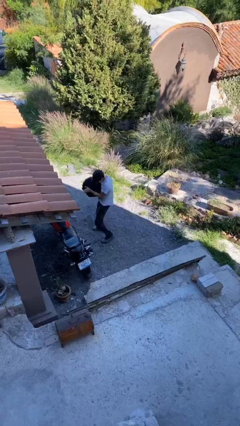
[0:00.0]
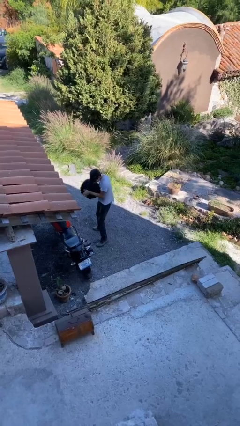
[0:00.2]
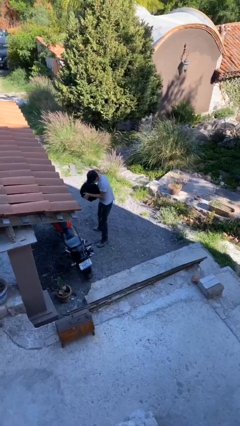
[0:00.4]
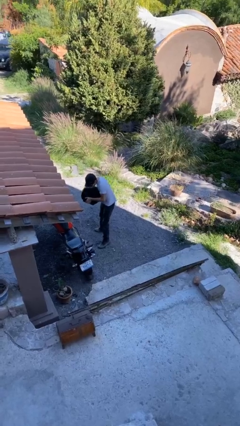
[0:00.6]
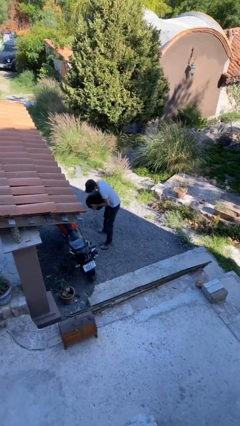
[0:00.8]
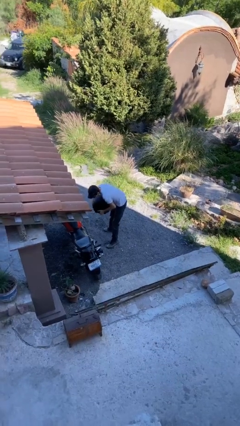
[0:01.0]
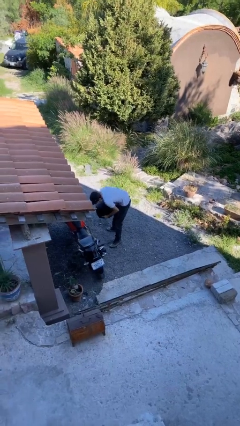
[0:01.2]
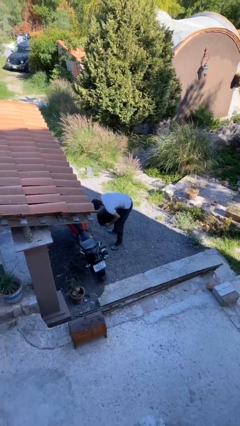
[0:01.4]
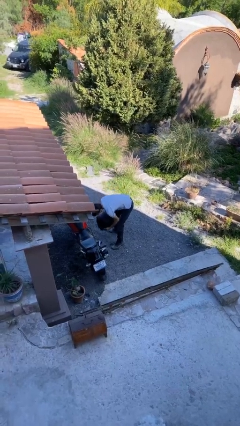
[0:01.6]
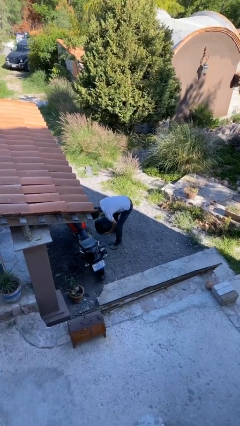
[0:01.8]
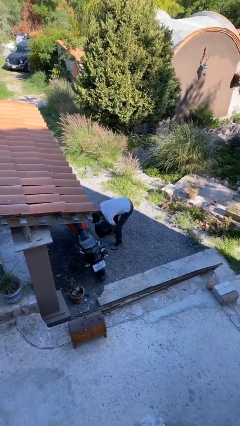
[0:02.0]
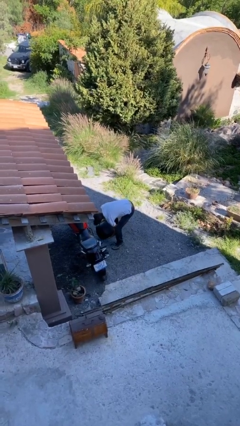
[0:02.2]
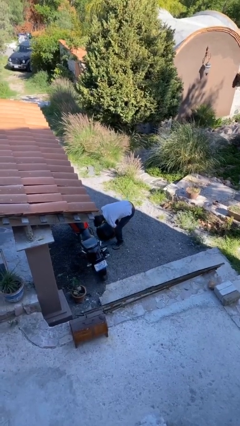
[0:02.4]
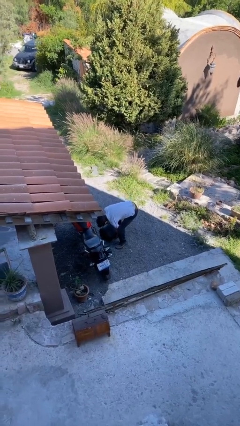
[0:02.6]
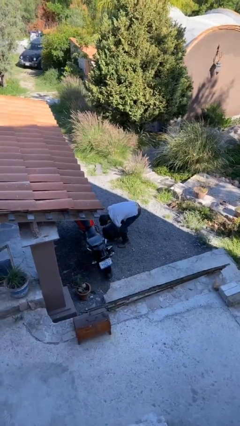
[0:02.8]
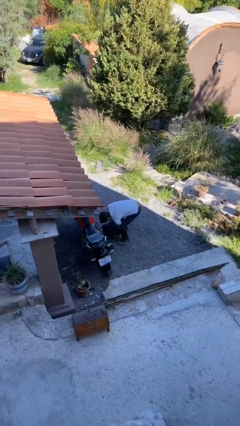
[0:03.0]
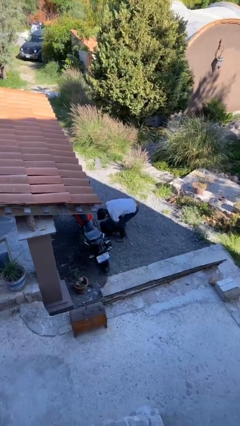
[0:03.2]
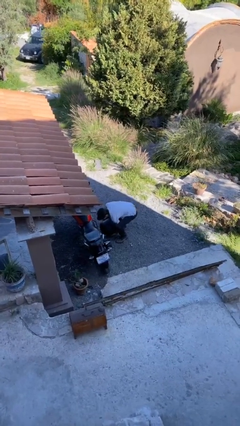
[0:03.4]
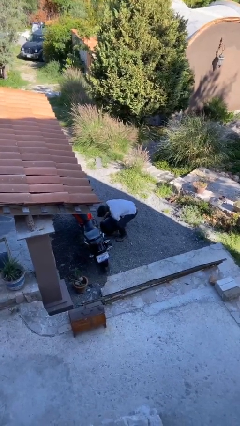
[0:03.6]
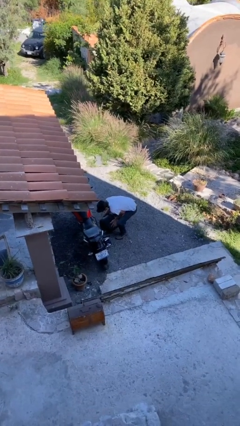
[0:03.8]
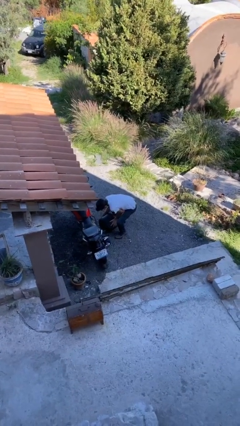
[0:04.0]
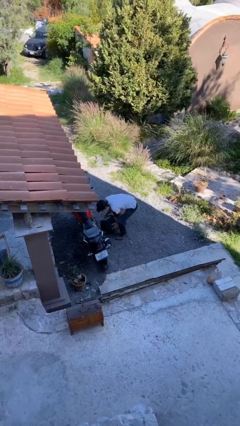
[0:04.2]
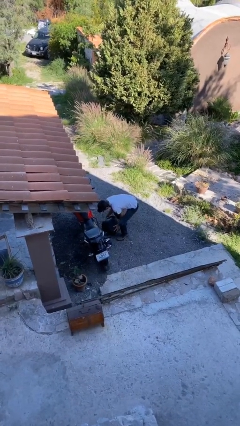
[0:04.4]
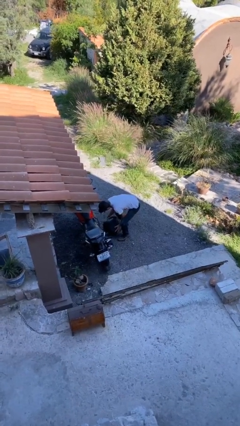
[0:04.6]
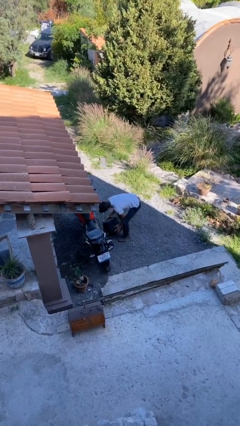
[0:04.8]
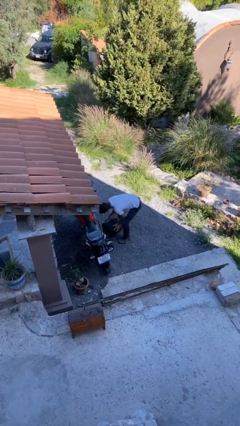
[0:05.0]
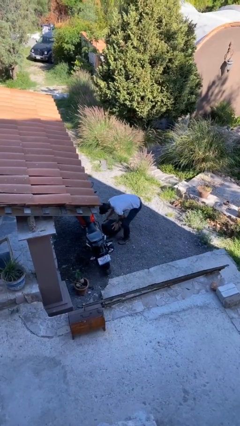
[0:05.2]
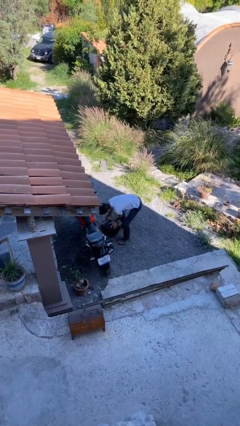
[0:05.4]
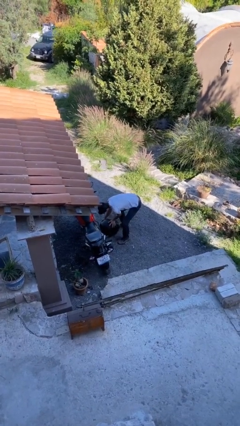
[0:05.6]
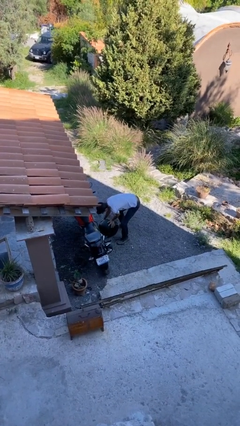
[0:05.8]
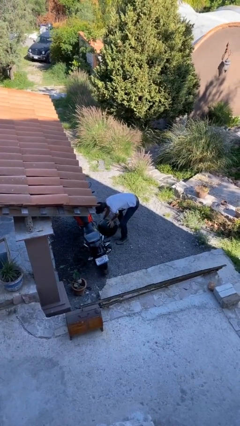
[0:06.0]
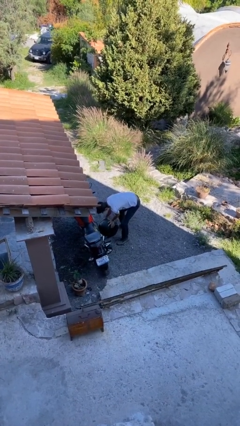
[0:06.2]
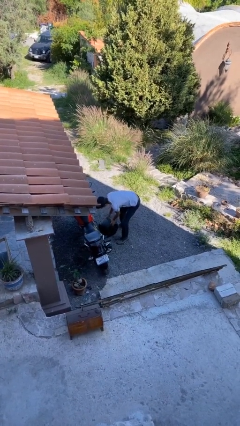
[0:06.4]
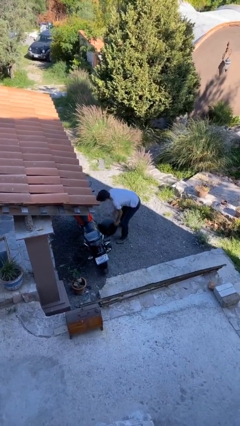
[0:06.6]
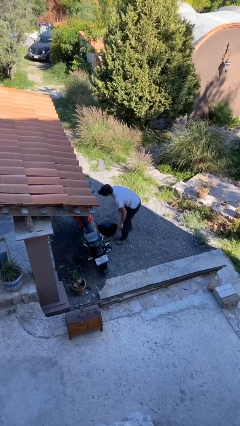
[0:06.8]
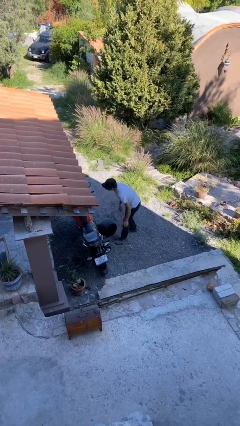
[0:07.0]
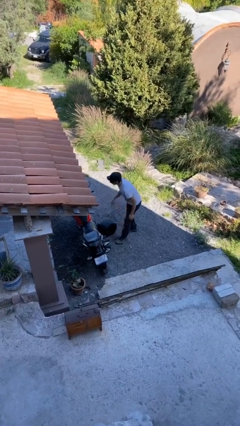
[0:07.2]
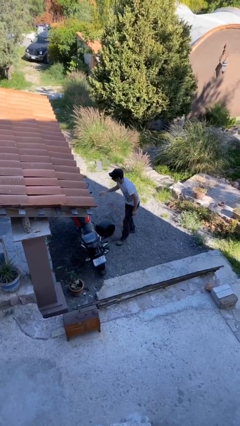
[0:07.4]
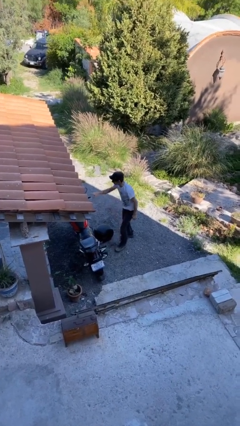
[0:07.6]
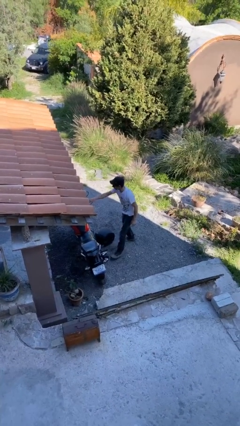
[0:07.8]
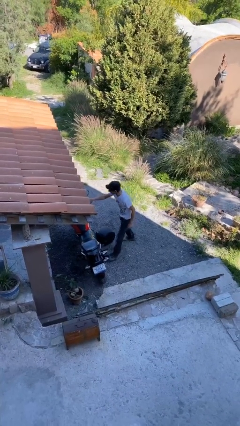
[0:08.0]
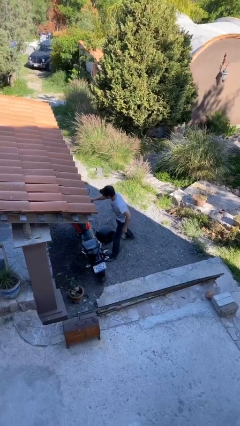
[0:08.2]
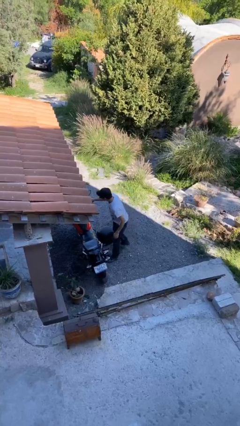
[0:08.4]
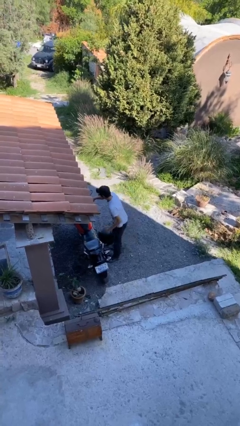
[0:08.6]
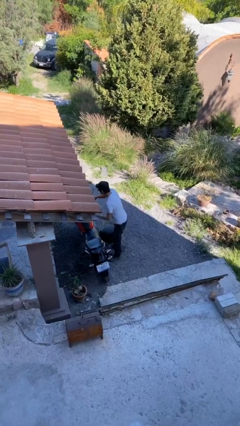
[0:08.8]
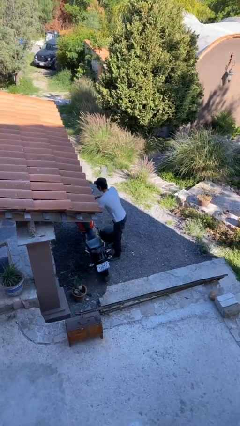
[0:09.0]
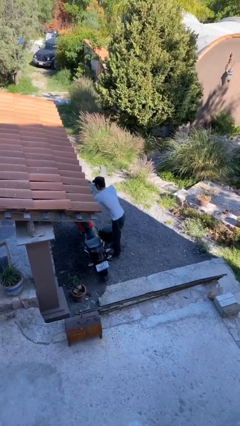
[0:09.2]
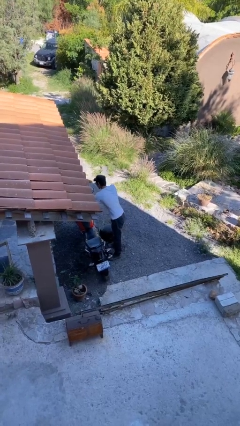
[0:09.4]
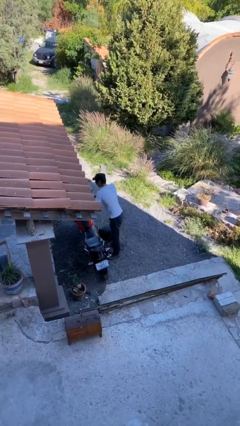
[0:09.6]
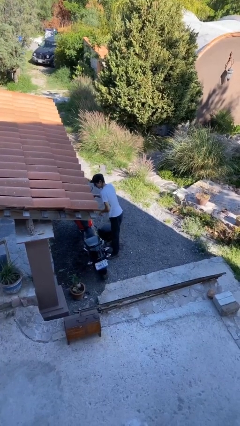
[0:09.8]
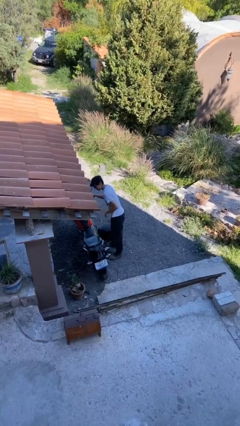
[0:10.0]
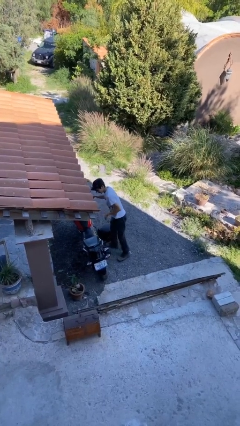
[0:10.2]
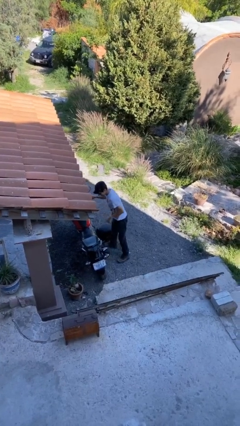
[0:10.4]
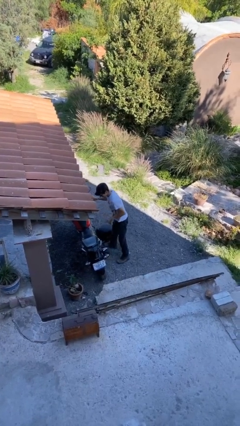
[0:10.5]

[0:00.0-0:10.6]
person puts down object on floor

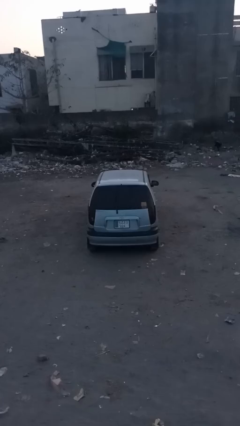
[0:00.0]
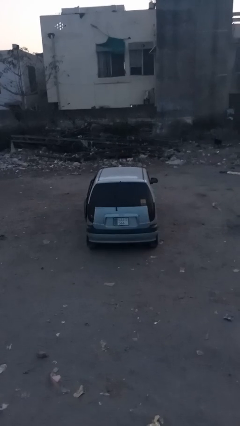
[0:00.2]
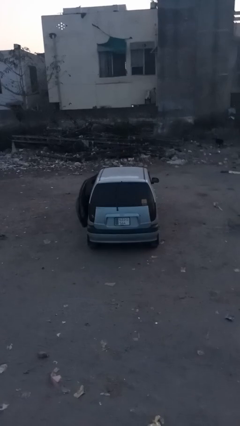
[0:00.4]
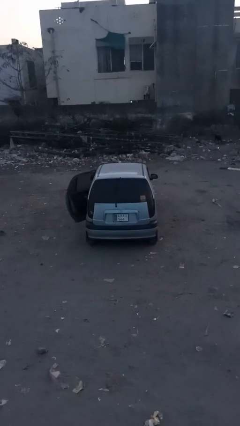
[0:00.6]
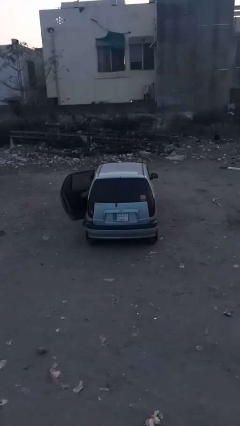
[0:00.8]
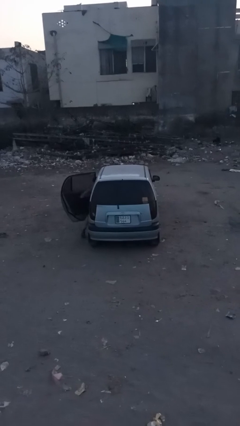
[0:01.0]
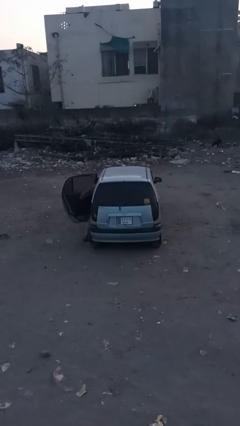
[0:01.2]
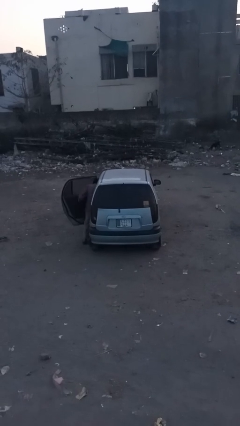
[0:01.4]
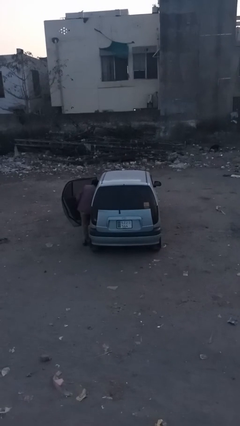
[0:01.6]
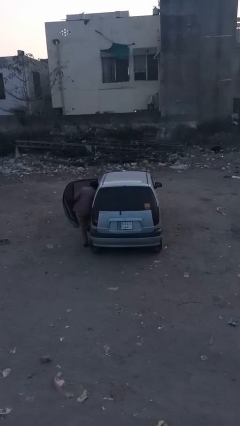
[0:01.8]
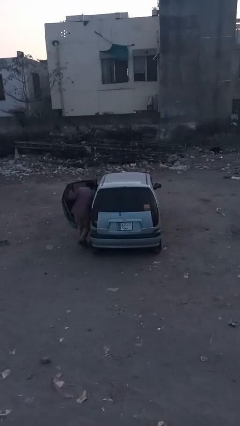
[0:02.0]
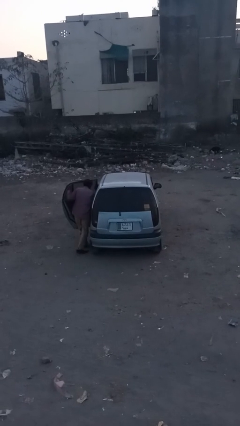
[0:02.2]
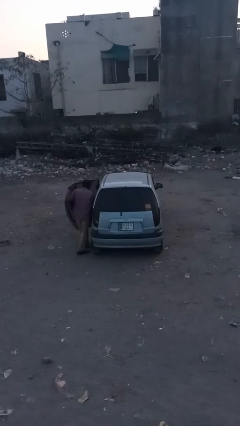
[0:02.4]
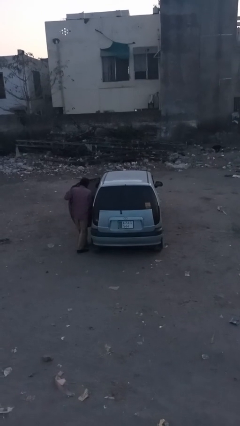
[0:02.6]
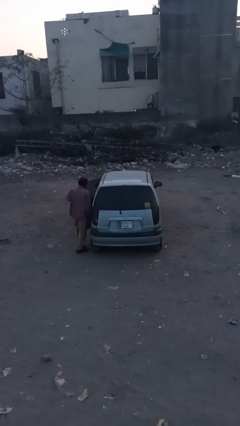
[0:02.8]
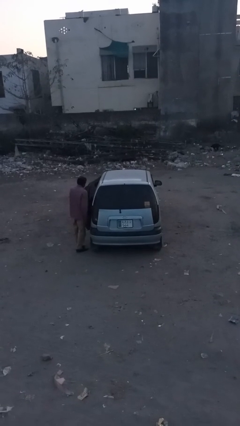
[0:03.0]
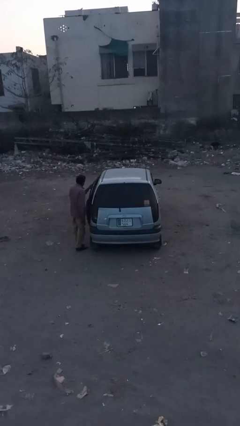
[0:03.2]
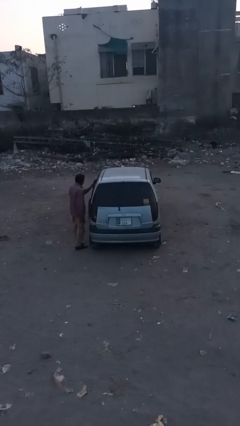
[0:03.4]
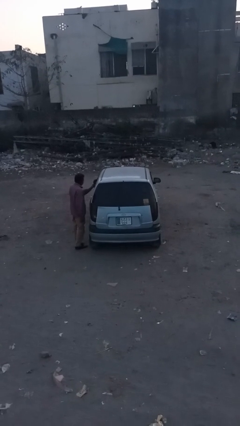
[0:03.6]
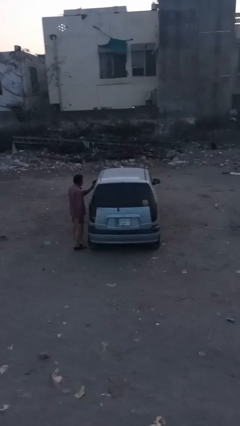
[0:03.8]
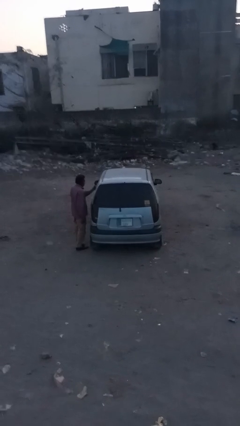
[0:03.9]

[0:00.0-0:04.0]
car drops off person

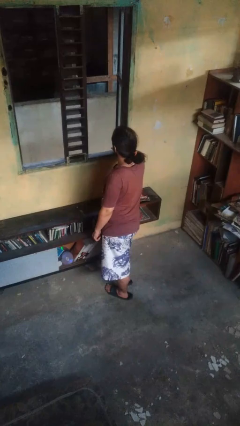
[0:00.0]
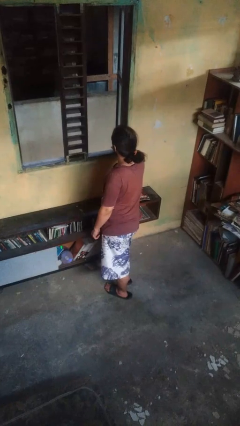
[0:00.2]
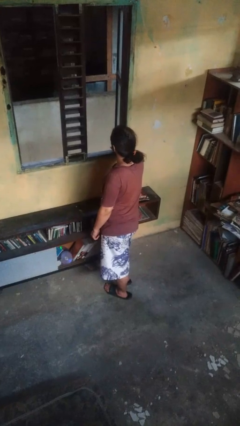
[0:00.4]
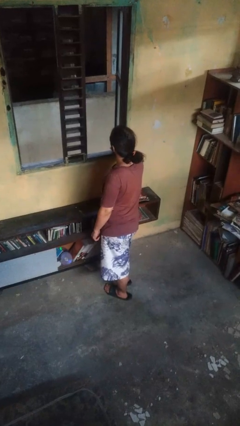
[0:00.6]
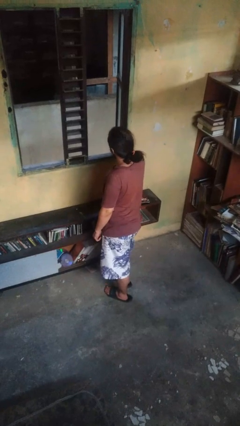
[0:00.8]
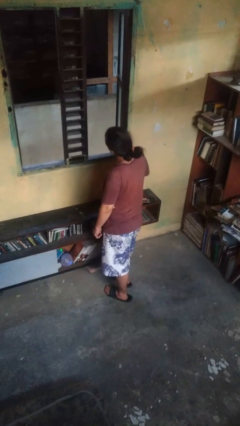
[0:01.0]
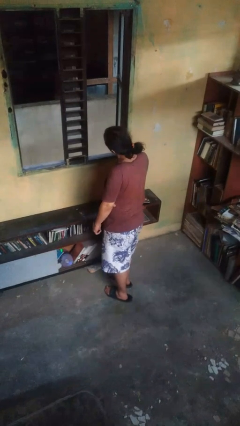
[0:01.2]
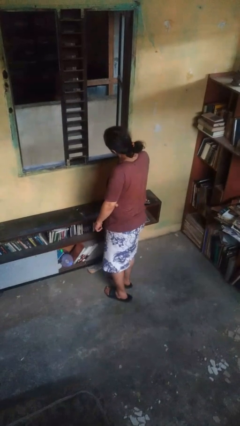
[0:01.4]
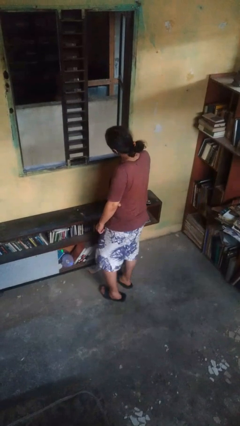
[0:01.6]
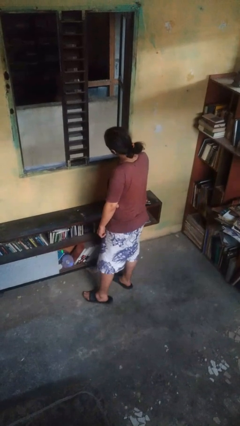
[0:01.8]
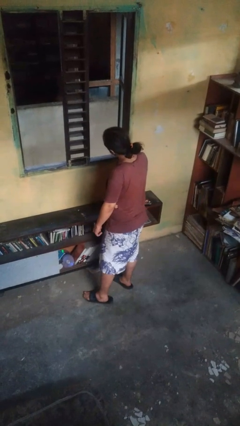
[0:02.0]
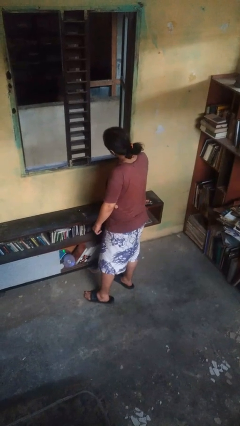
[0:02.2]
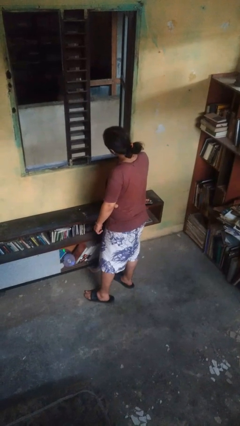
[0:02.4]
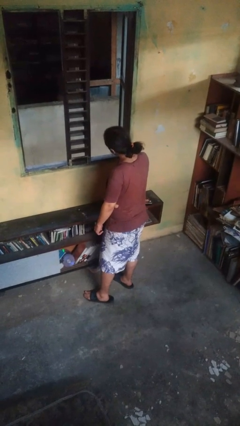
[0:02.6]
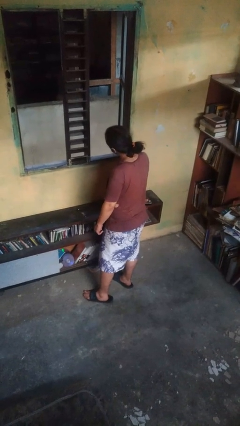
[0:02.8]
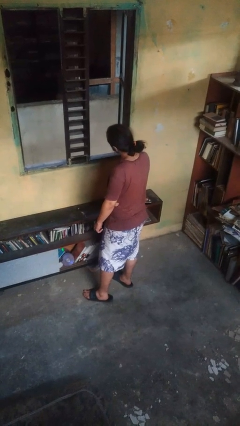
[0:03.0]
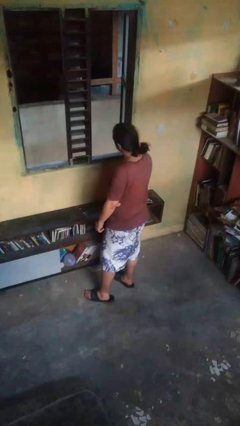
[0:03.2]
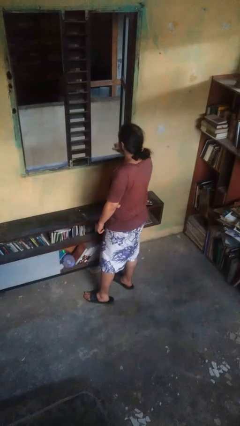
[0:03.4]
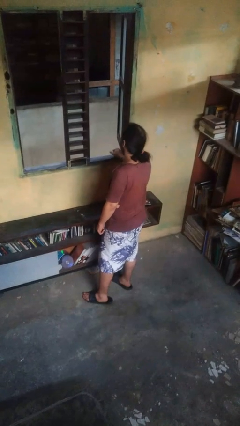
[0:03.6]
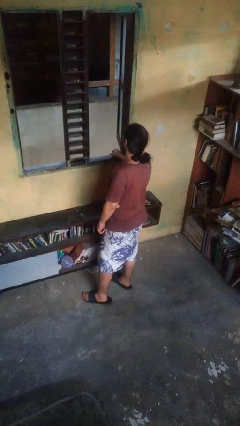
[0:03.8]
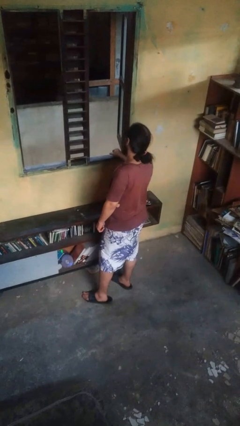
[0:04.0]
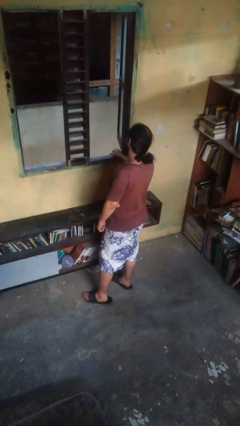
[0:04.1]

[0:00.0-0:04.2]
person gestures listen closely
